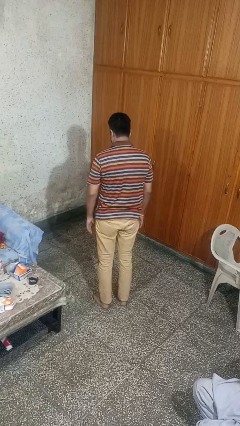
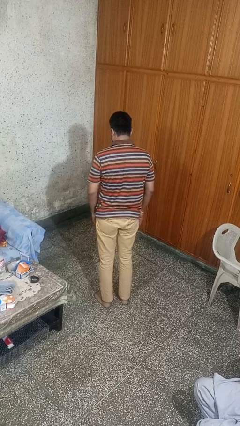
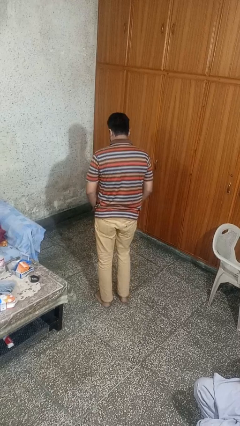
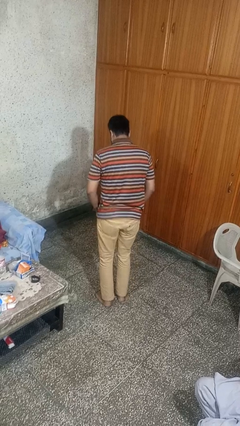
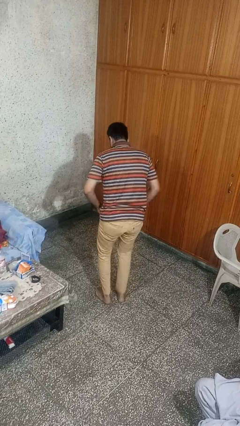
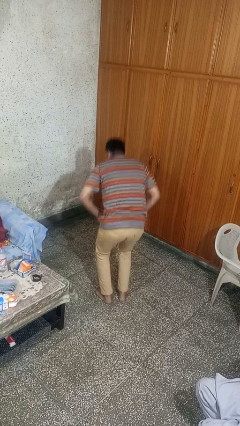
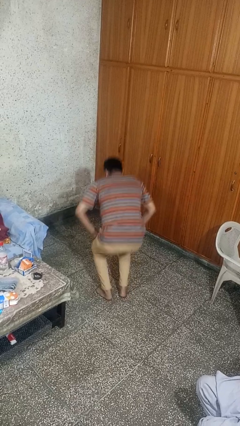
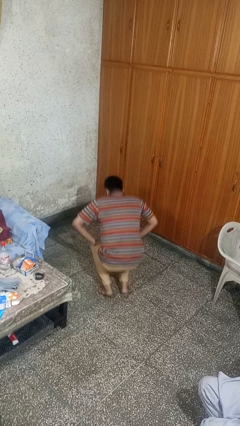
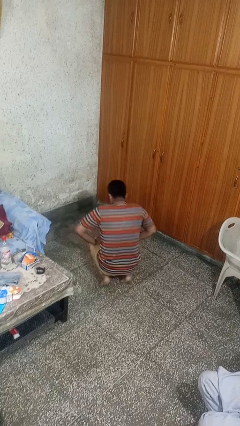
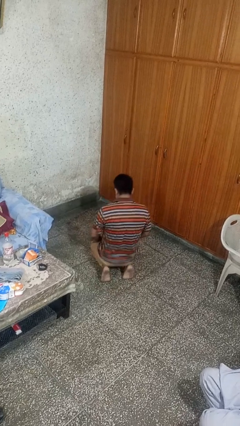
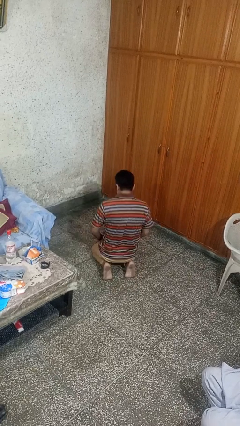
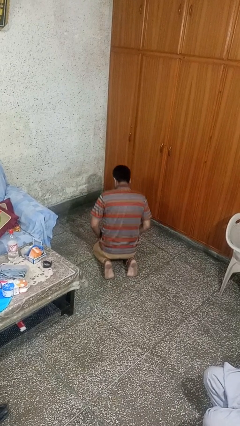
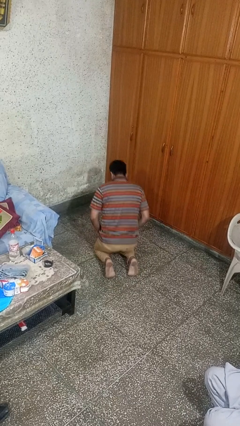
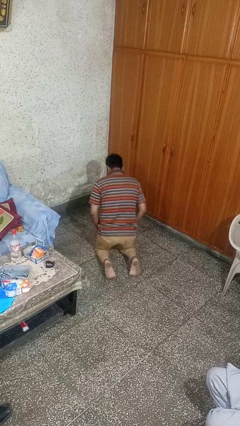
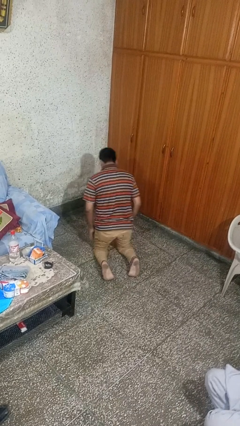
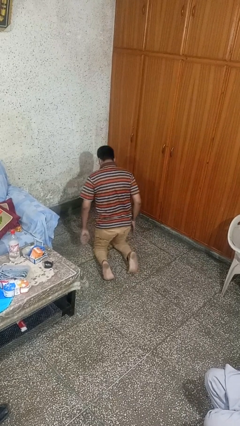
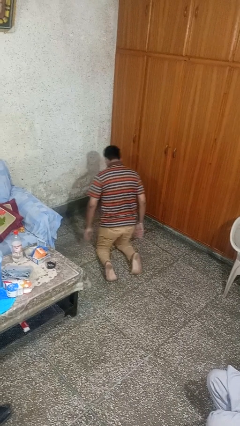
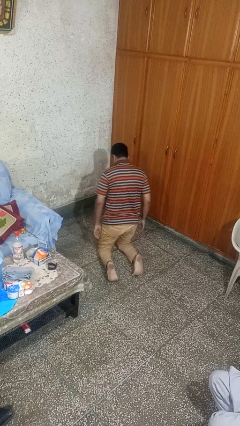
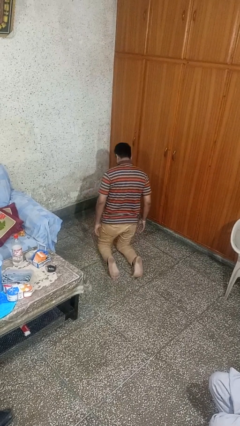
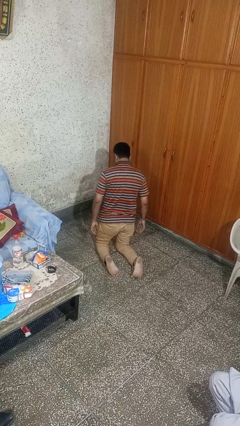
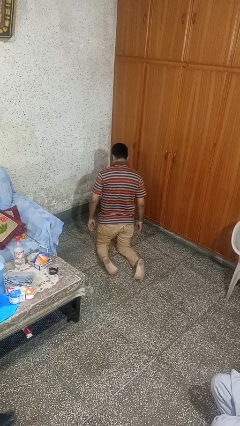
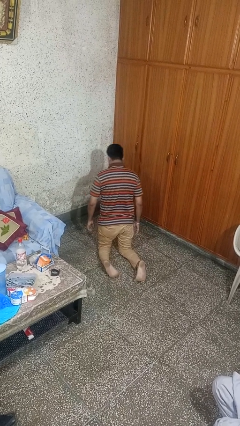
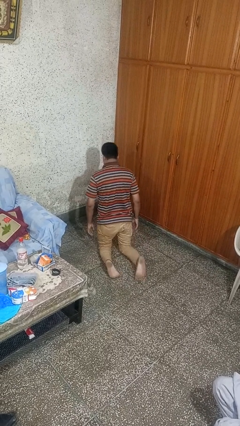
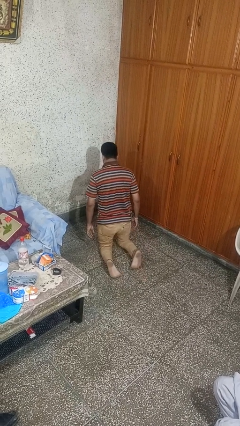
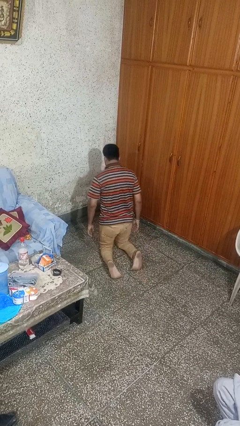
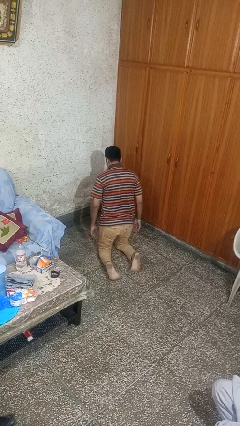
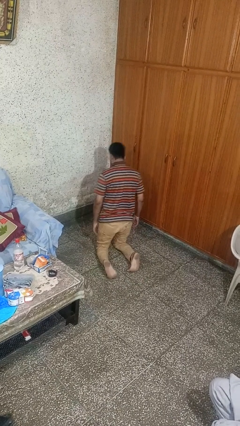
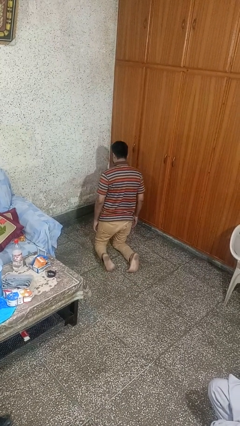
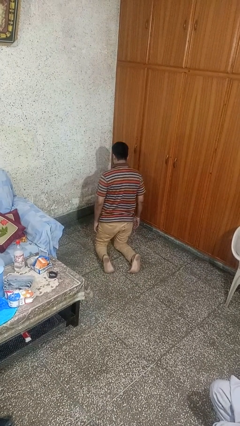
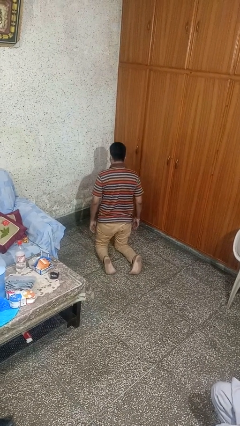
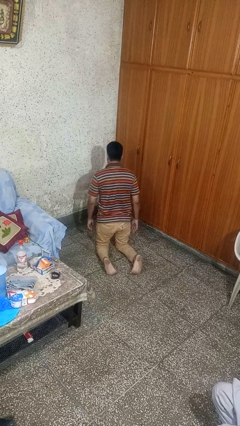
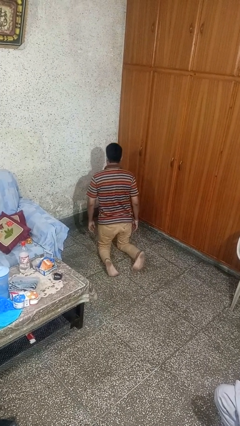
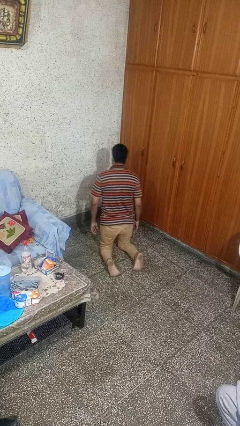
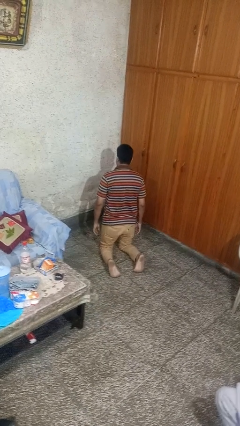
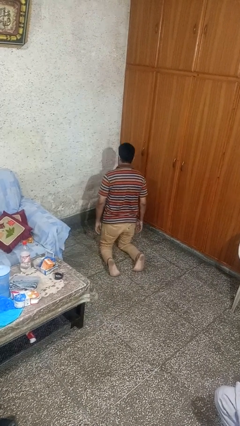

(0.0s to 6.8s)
person exercises with lunges

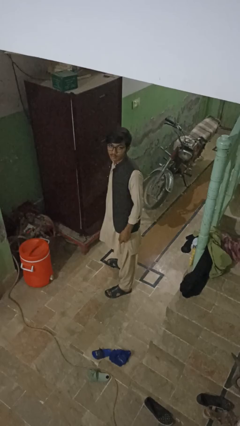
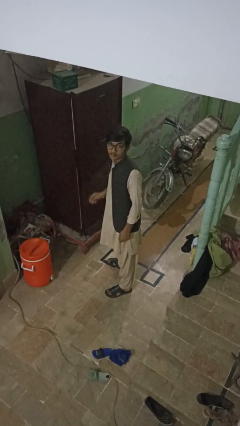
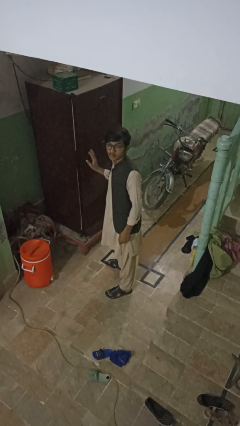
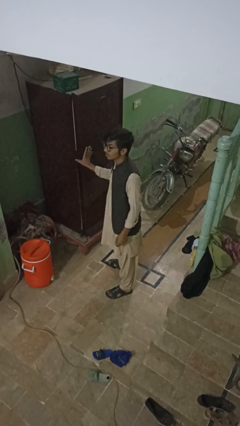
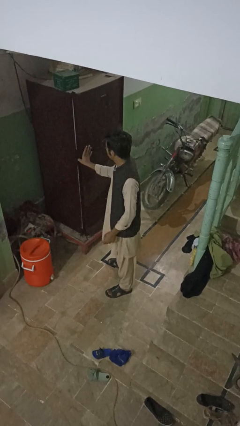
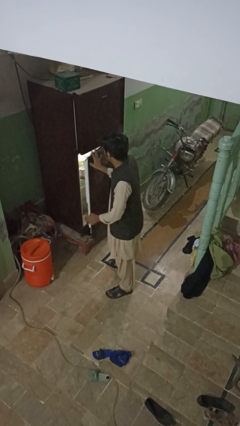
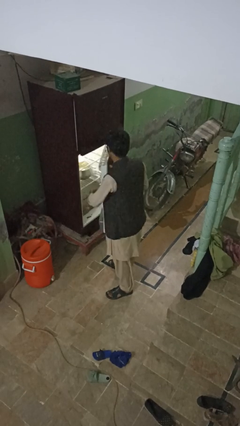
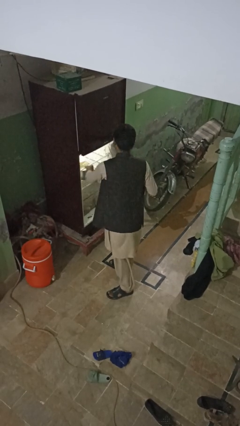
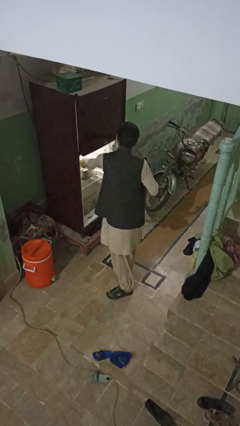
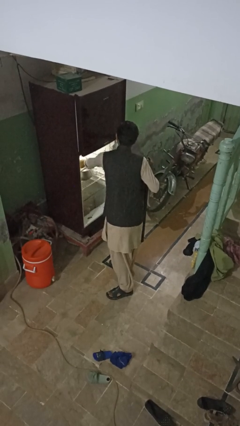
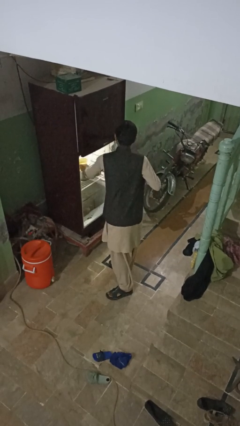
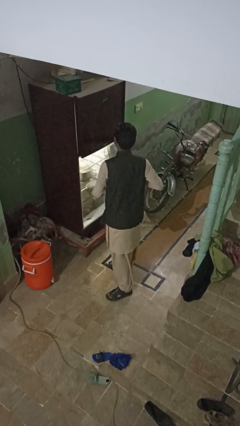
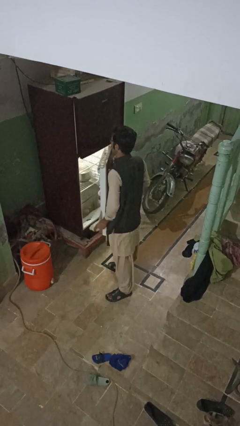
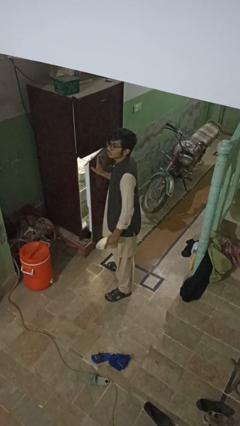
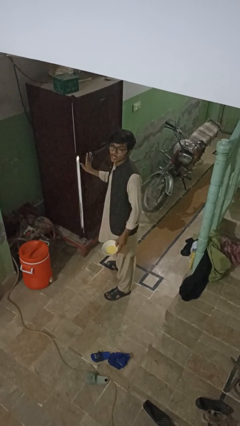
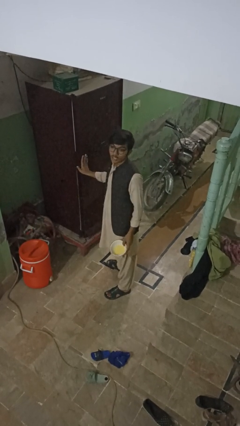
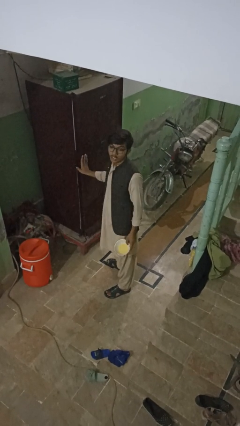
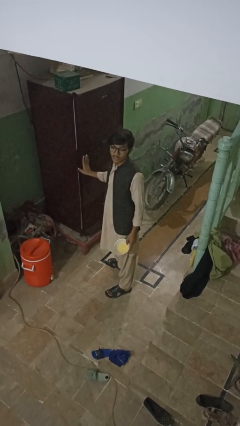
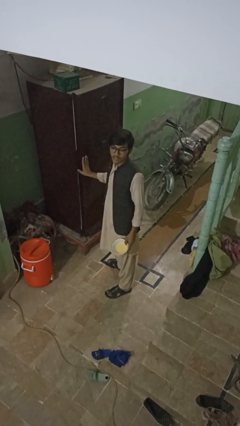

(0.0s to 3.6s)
person takes object from refrigerator

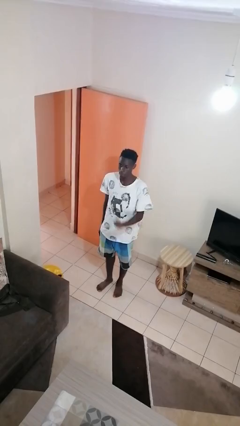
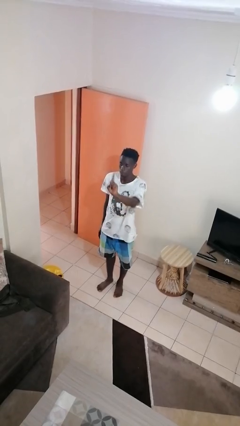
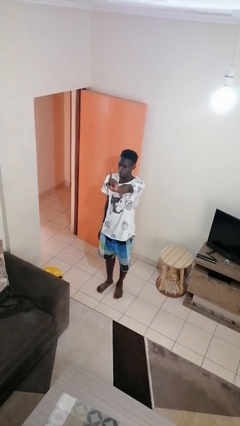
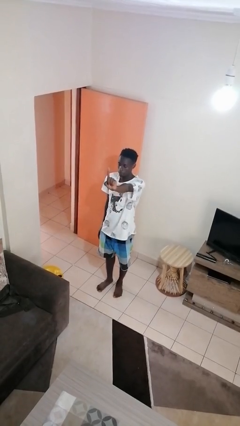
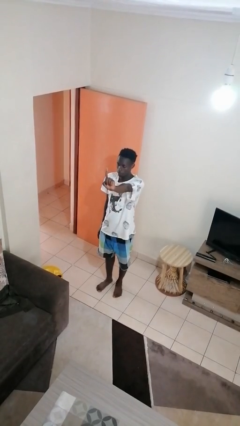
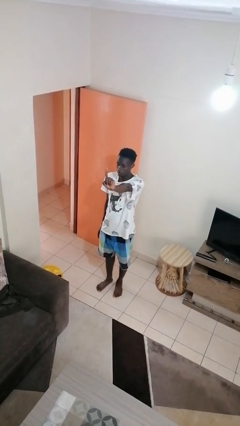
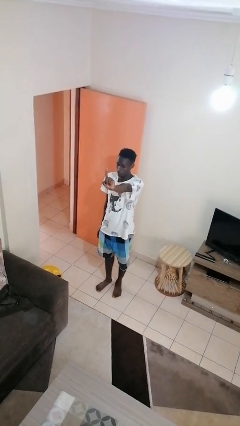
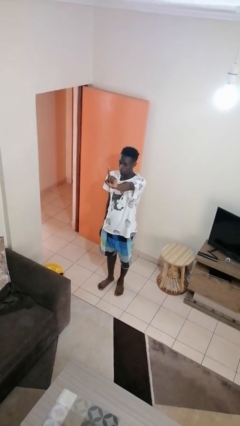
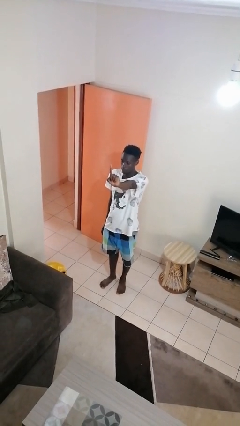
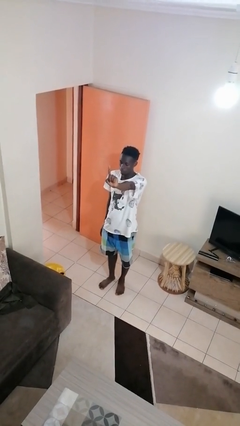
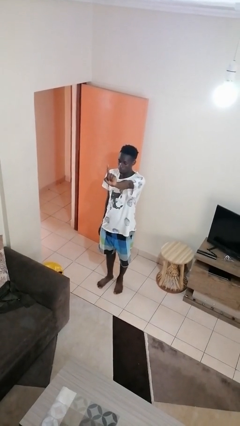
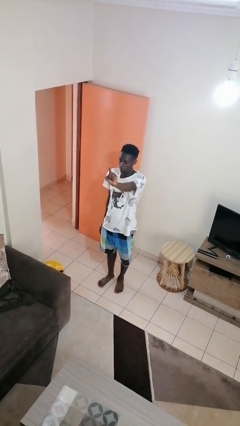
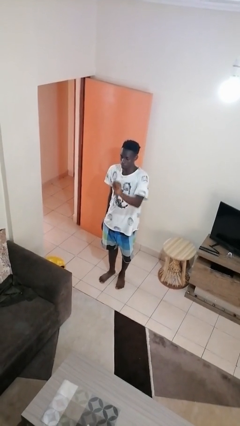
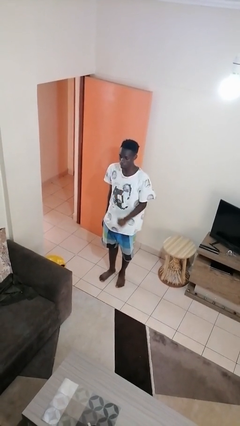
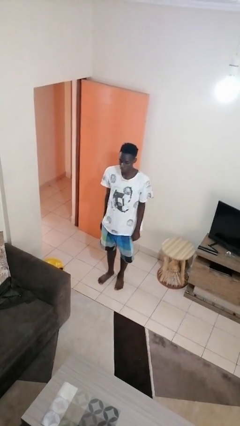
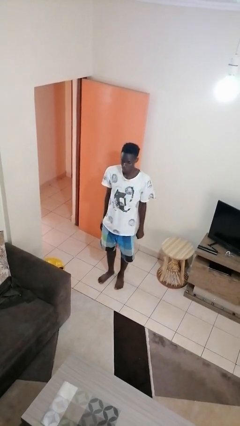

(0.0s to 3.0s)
person gestures number one

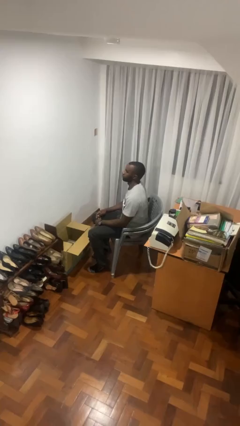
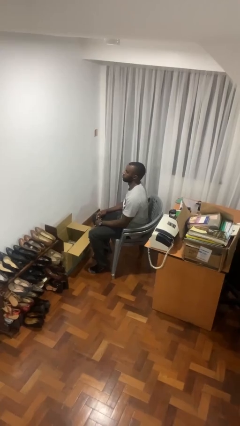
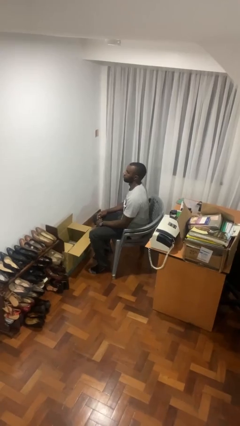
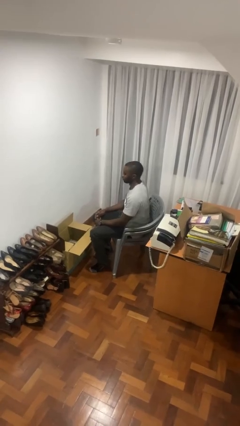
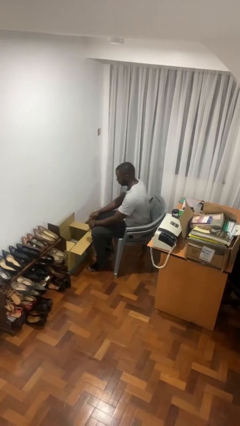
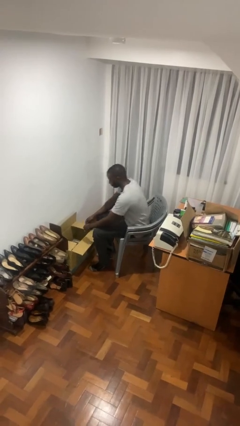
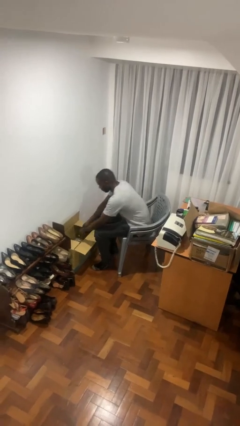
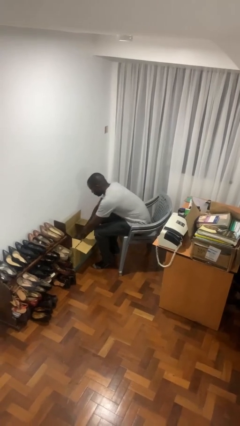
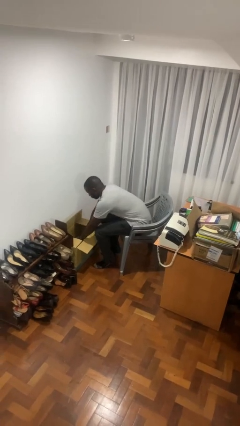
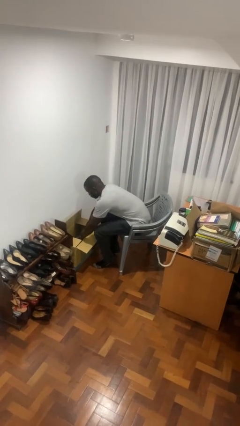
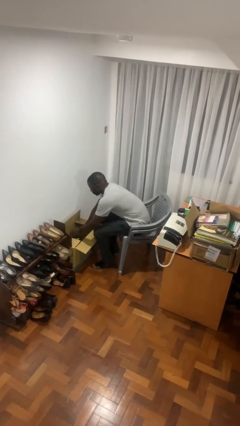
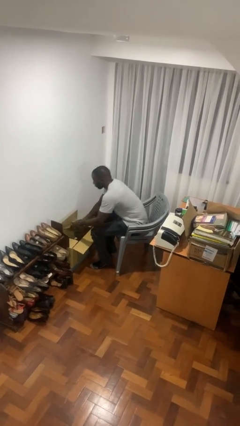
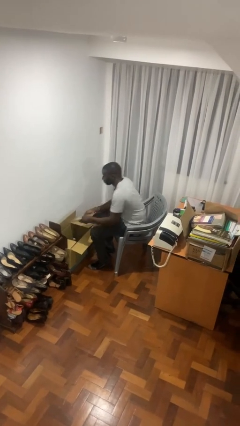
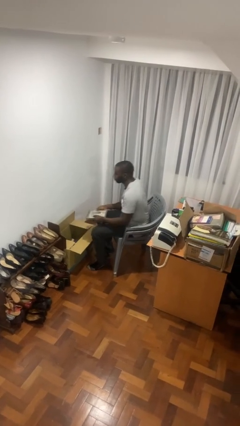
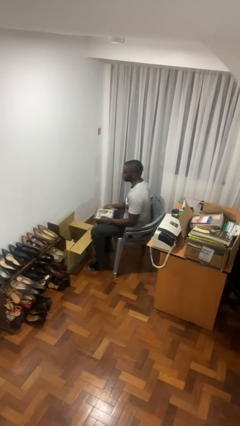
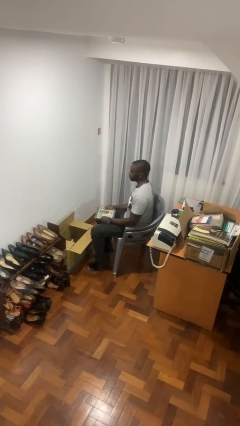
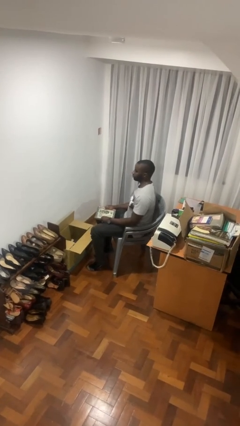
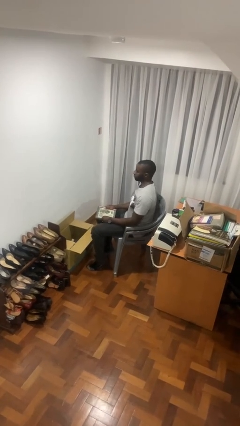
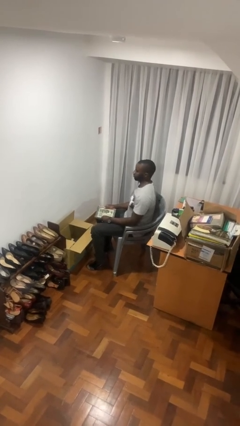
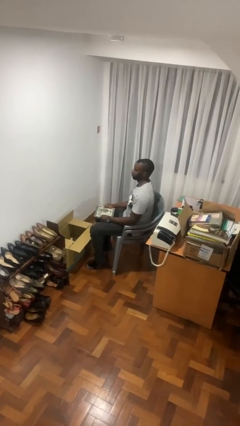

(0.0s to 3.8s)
person takes object from box

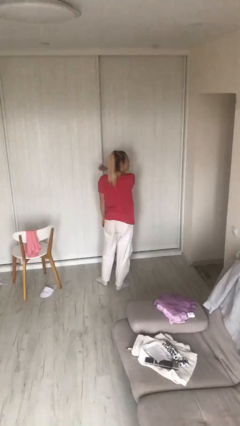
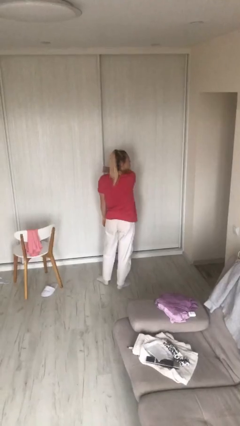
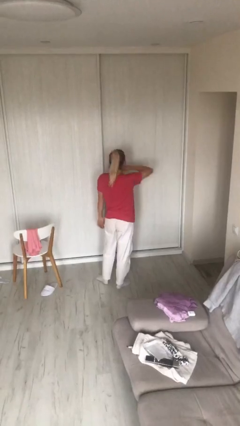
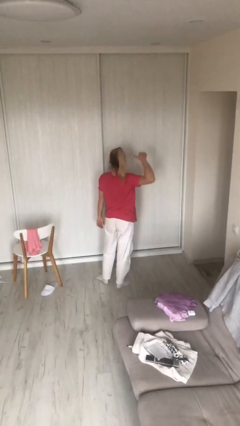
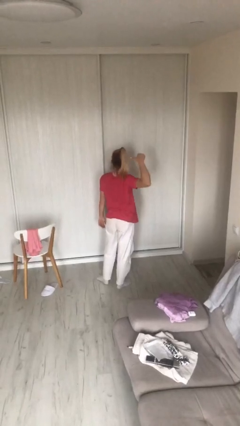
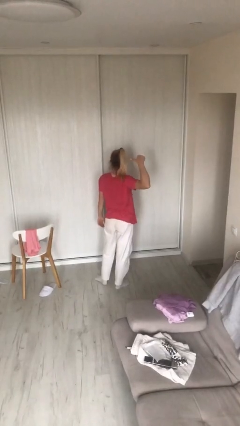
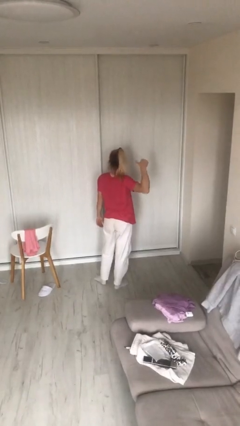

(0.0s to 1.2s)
person gestures cut
